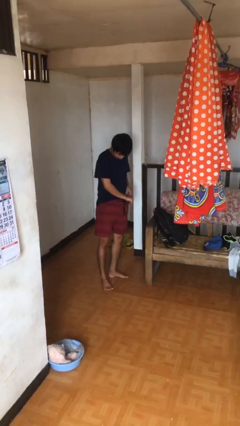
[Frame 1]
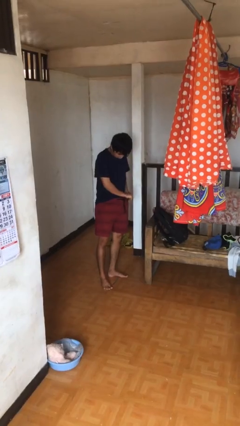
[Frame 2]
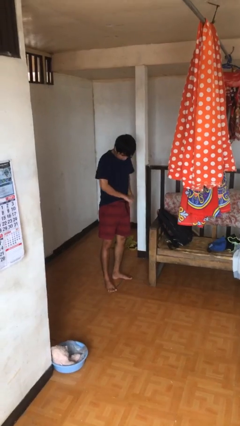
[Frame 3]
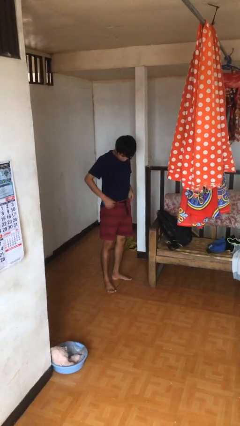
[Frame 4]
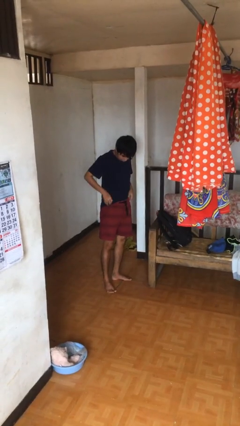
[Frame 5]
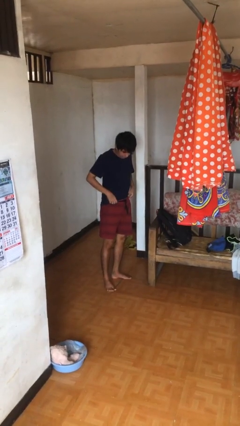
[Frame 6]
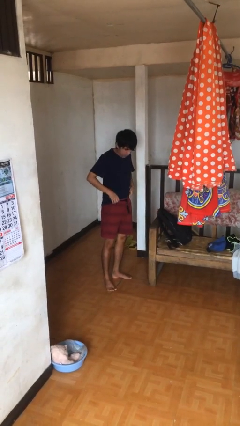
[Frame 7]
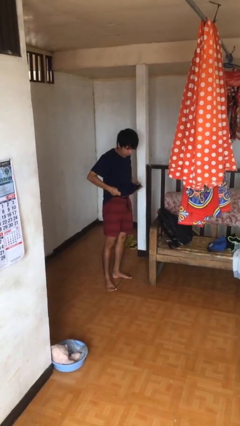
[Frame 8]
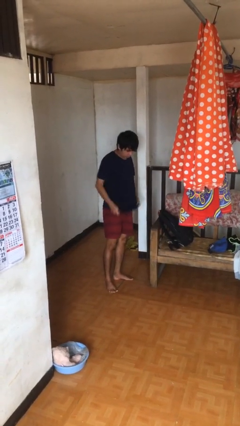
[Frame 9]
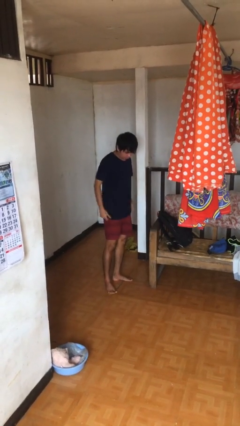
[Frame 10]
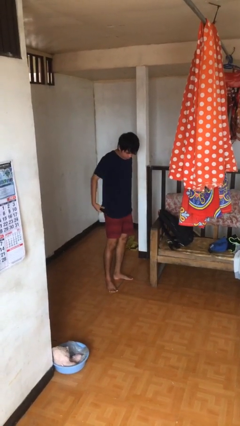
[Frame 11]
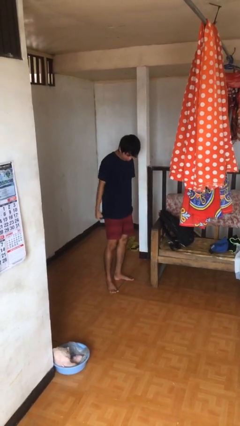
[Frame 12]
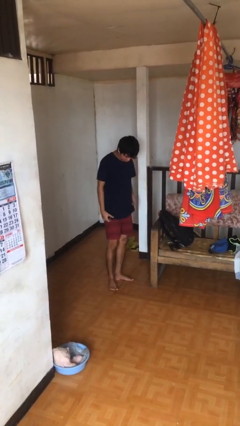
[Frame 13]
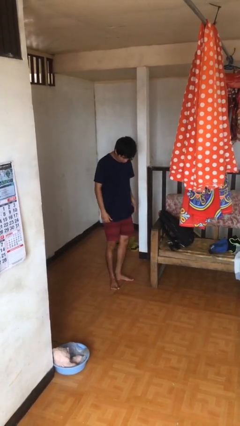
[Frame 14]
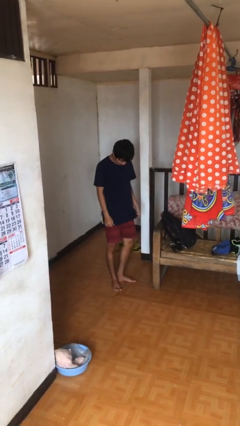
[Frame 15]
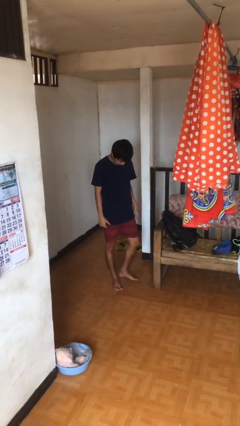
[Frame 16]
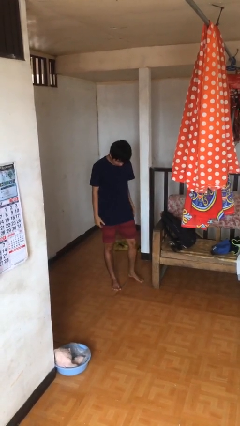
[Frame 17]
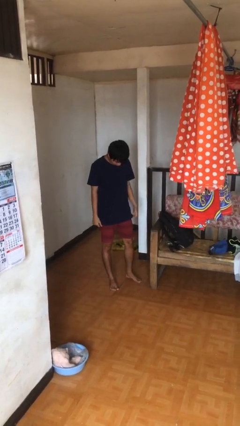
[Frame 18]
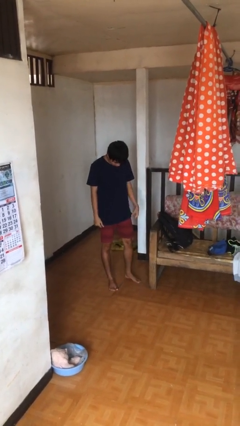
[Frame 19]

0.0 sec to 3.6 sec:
person untucks shirt

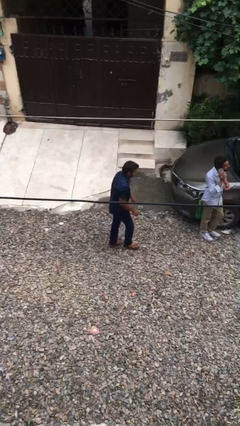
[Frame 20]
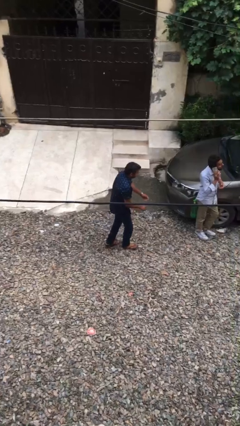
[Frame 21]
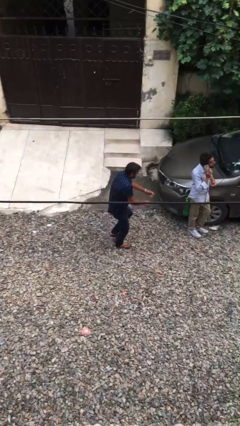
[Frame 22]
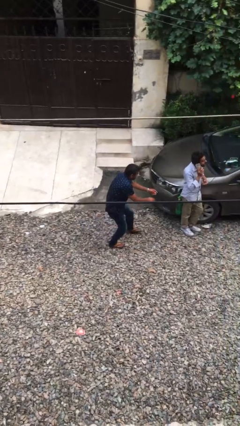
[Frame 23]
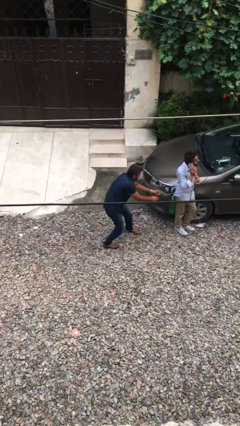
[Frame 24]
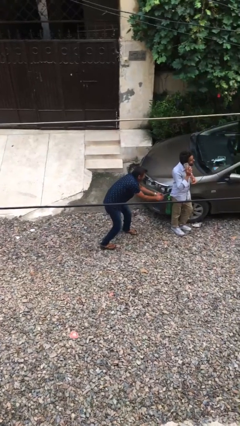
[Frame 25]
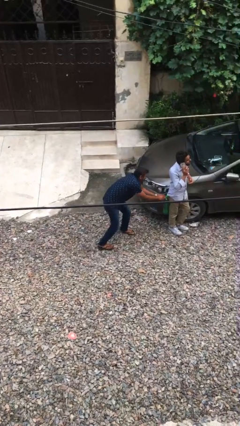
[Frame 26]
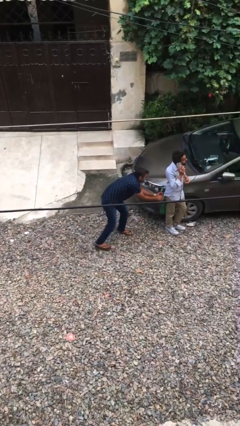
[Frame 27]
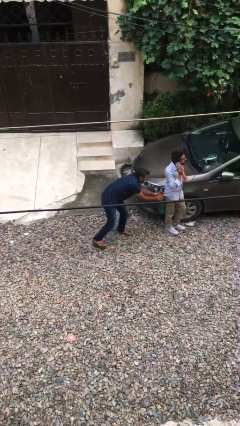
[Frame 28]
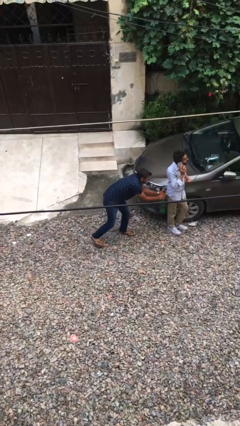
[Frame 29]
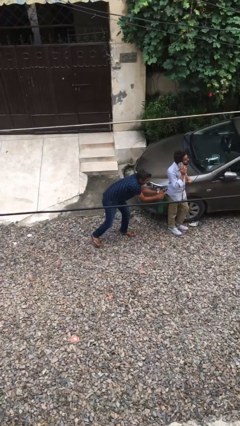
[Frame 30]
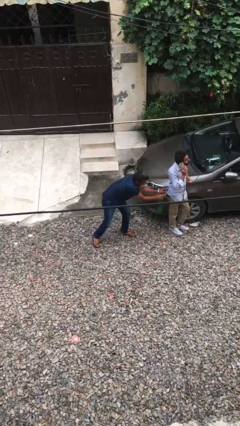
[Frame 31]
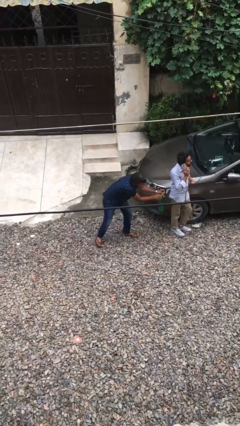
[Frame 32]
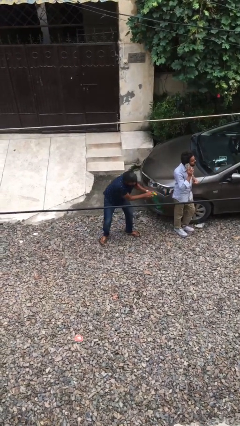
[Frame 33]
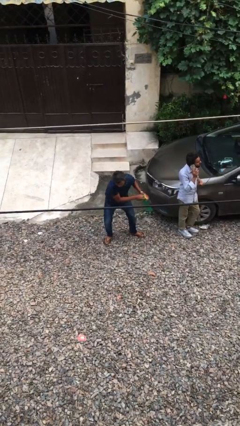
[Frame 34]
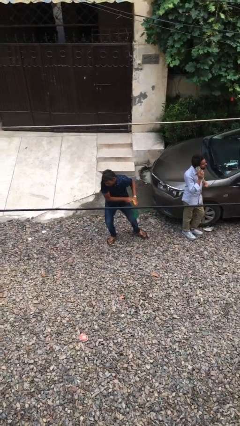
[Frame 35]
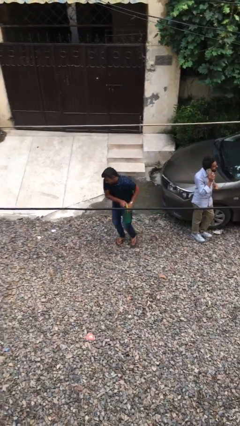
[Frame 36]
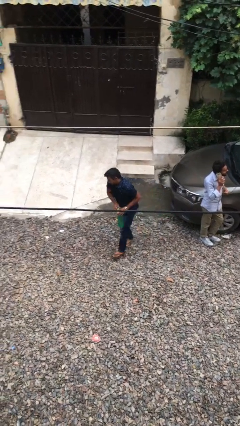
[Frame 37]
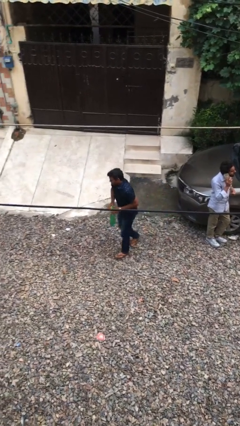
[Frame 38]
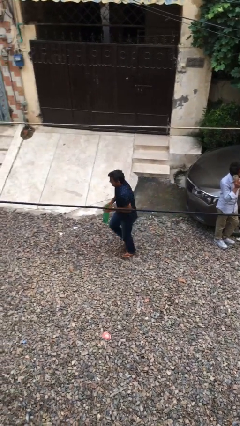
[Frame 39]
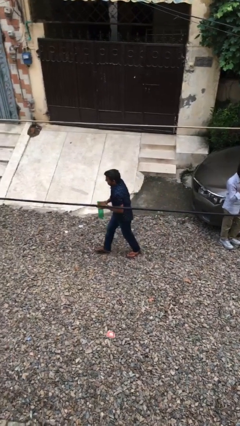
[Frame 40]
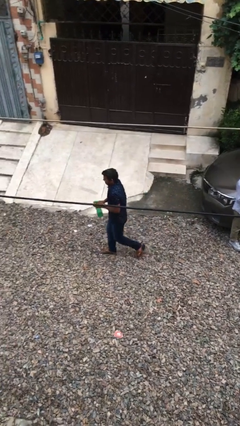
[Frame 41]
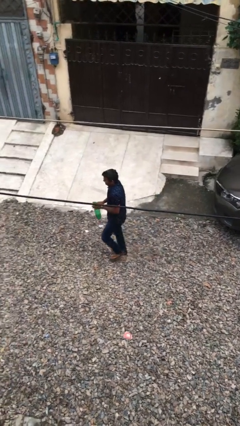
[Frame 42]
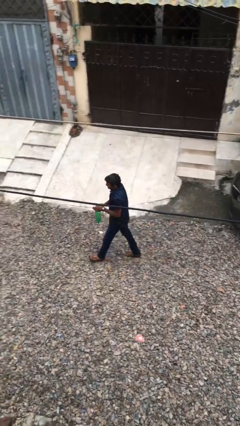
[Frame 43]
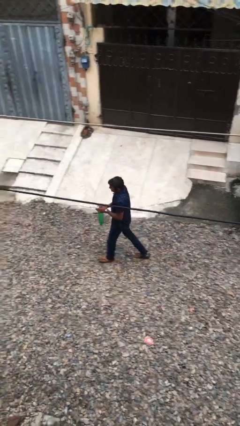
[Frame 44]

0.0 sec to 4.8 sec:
person steals object from person

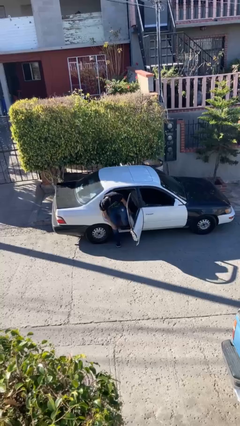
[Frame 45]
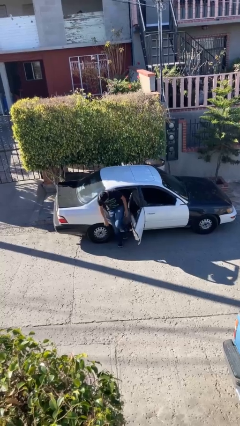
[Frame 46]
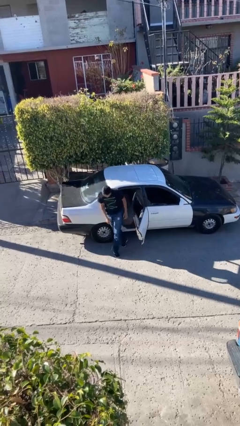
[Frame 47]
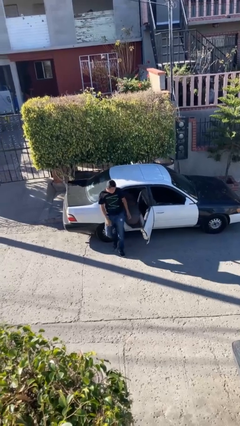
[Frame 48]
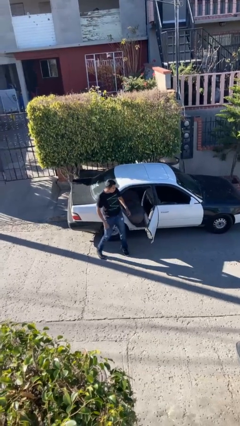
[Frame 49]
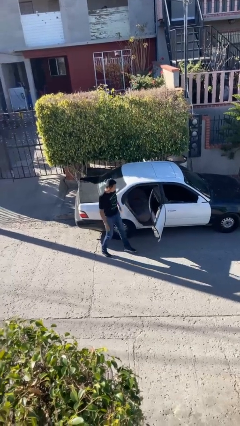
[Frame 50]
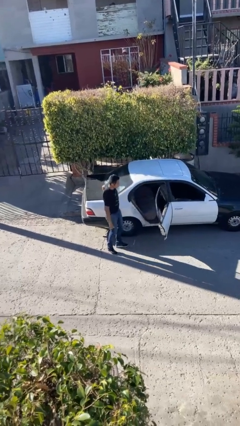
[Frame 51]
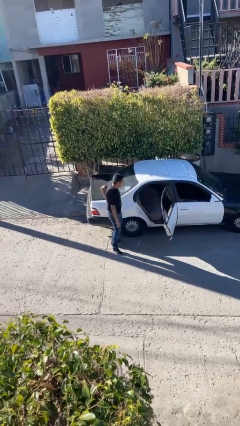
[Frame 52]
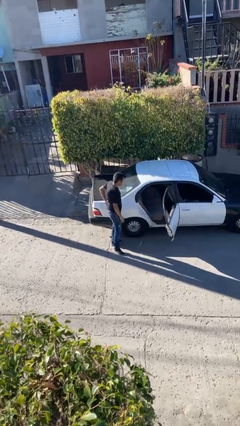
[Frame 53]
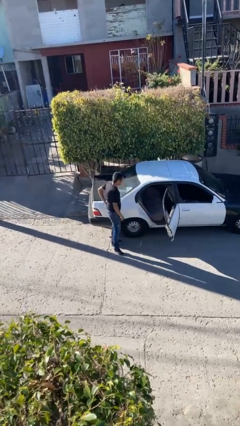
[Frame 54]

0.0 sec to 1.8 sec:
person exits car

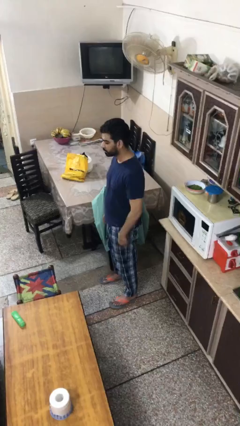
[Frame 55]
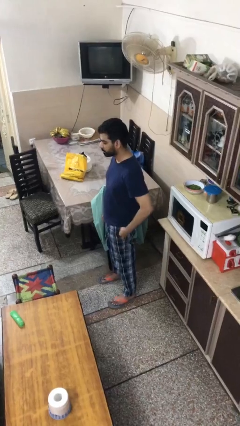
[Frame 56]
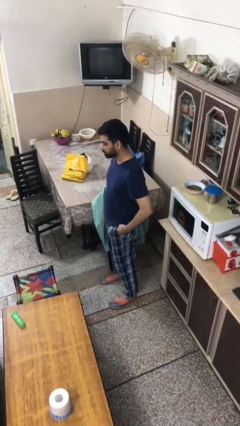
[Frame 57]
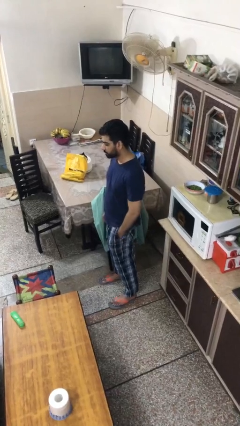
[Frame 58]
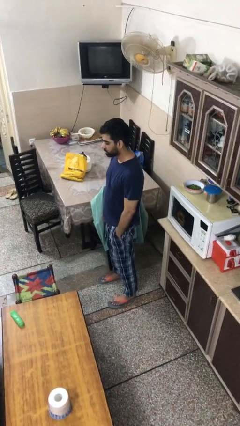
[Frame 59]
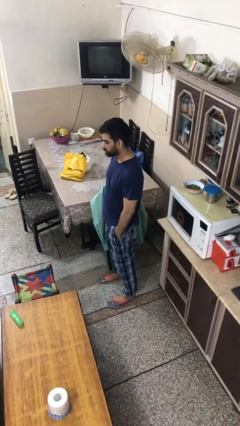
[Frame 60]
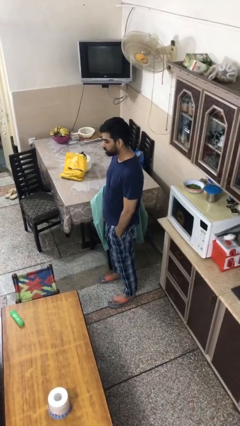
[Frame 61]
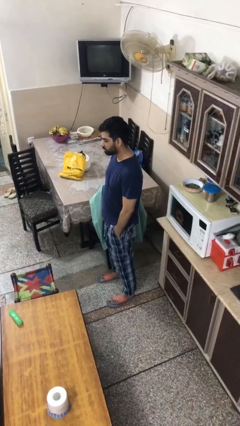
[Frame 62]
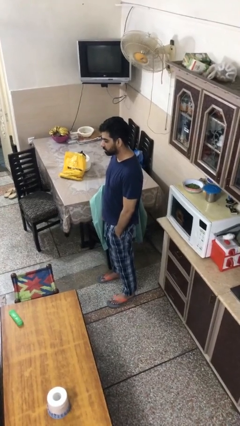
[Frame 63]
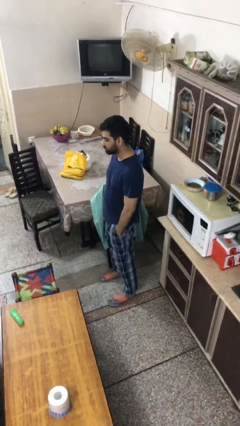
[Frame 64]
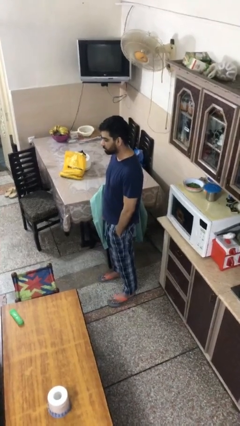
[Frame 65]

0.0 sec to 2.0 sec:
person puts hands in back pockets

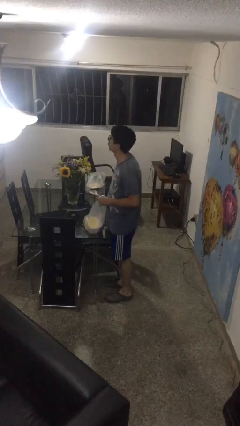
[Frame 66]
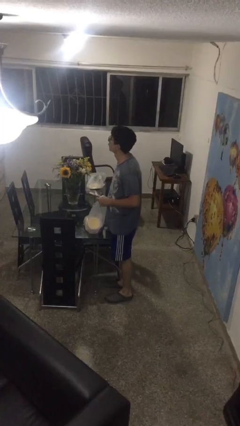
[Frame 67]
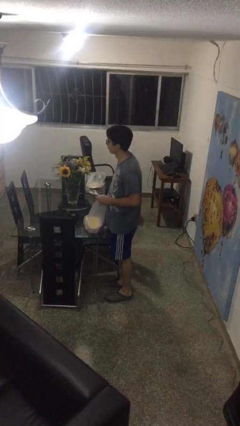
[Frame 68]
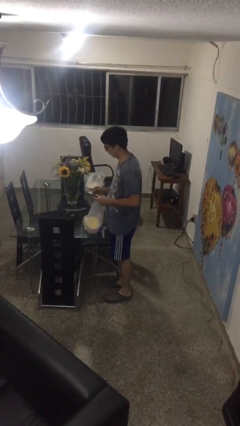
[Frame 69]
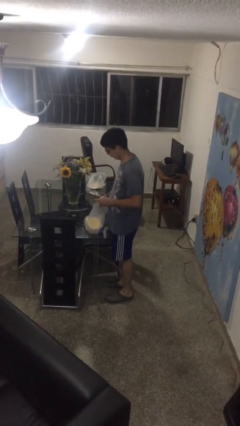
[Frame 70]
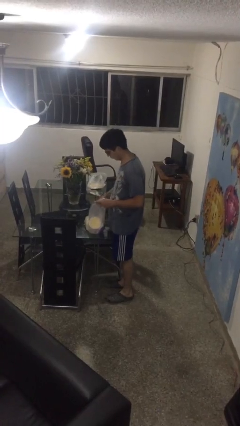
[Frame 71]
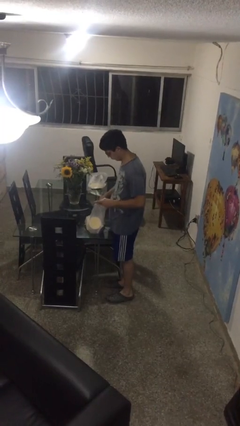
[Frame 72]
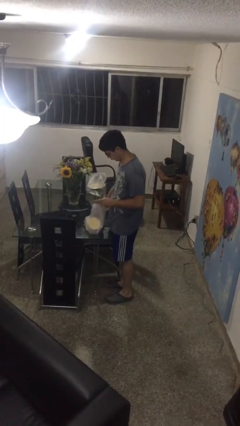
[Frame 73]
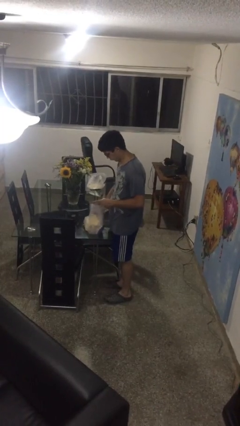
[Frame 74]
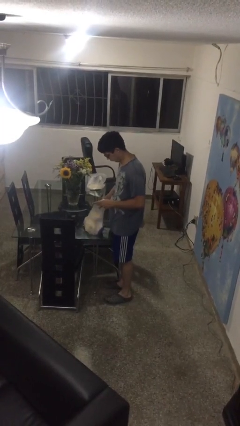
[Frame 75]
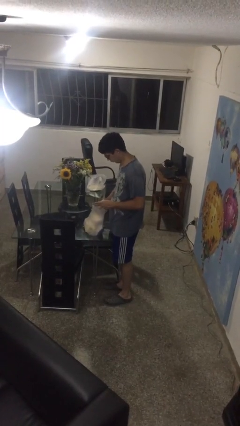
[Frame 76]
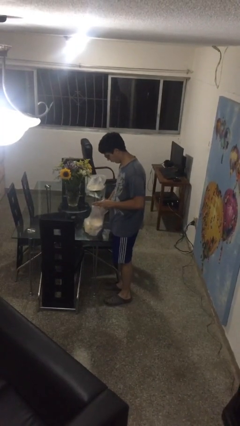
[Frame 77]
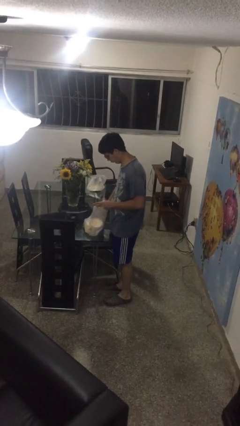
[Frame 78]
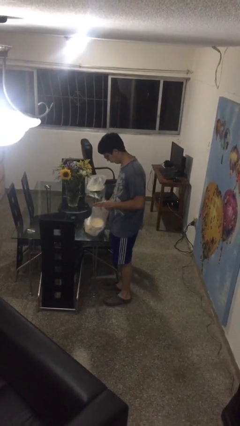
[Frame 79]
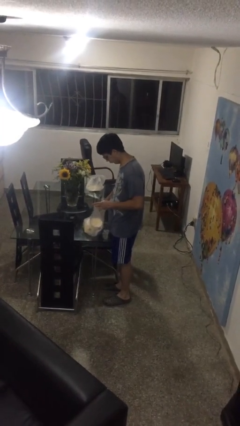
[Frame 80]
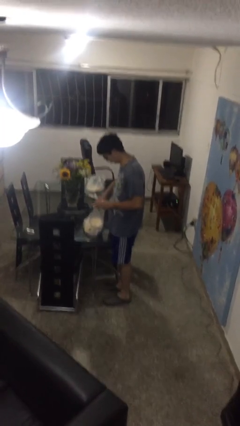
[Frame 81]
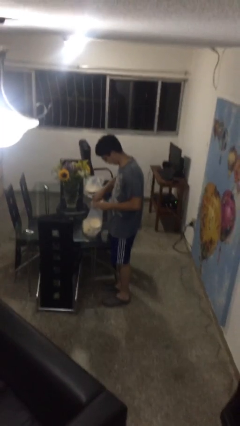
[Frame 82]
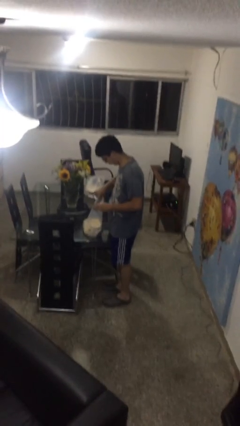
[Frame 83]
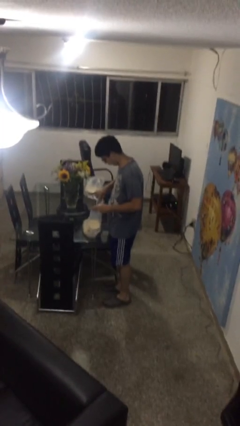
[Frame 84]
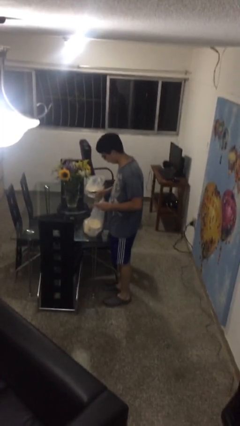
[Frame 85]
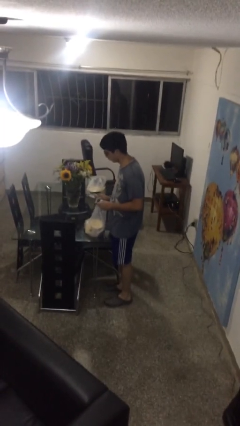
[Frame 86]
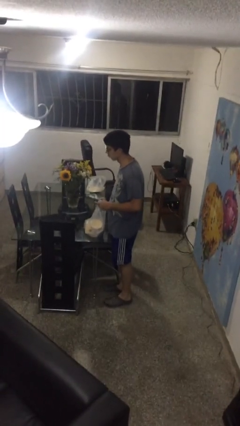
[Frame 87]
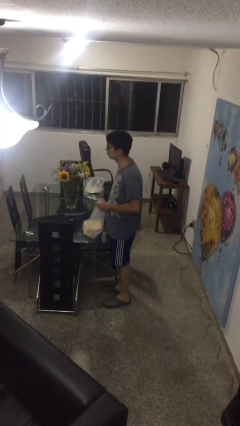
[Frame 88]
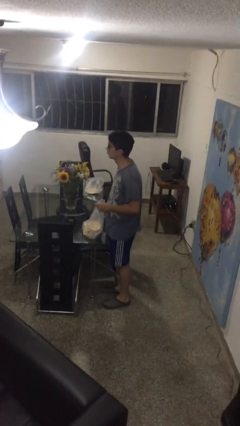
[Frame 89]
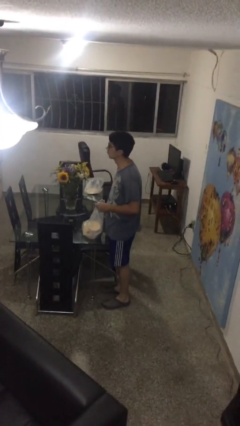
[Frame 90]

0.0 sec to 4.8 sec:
person searches in bag

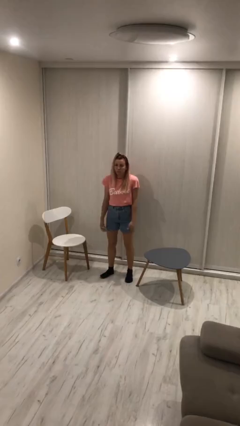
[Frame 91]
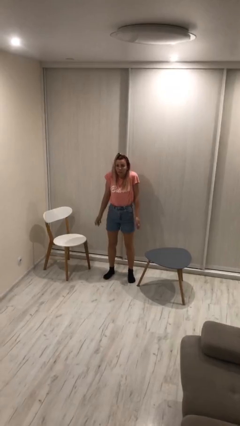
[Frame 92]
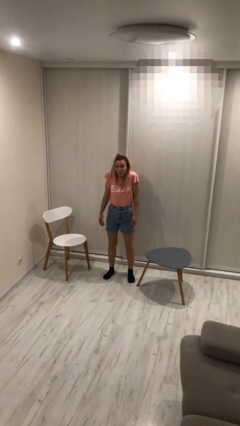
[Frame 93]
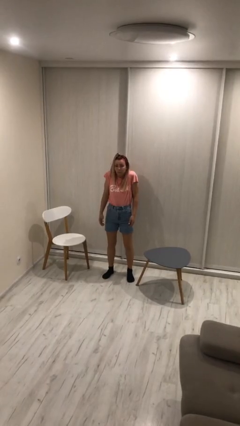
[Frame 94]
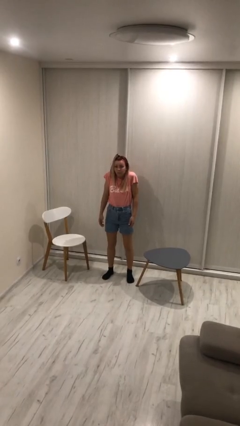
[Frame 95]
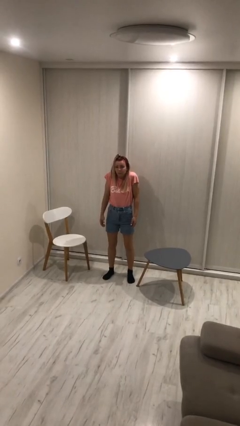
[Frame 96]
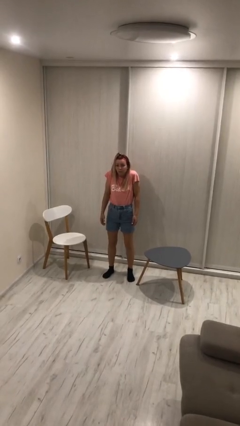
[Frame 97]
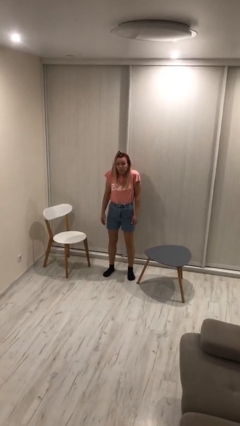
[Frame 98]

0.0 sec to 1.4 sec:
person shrugs
